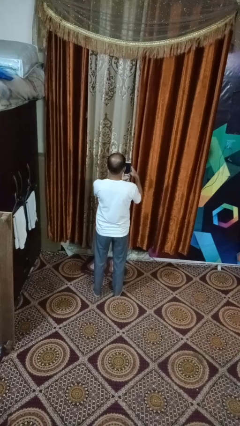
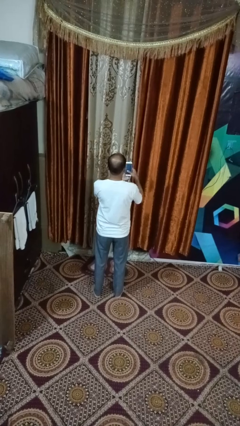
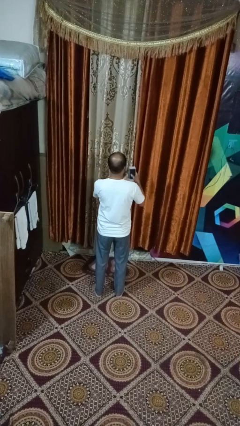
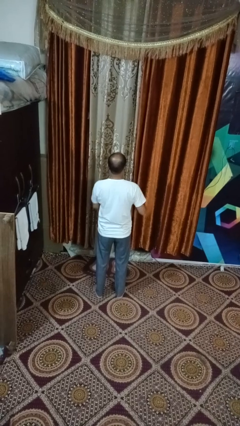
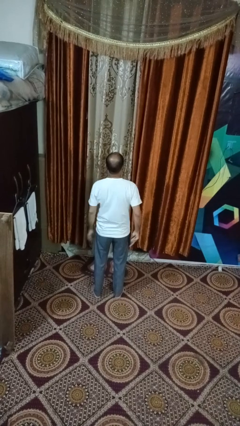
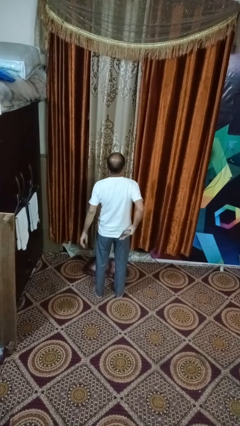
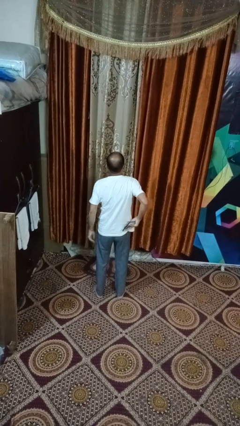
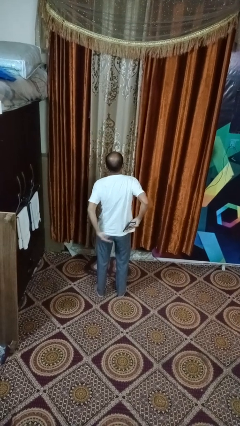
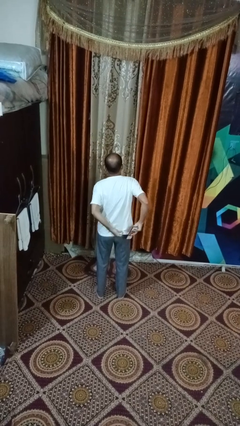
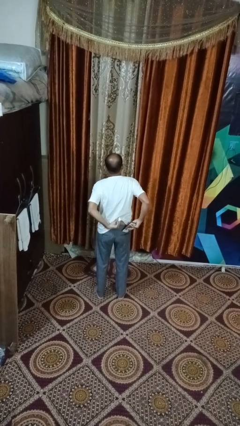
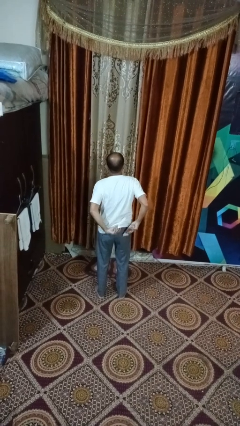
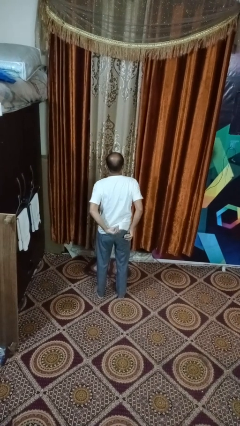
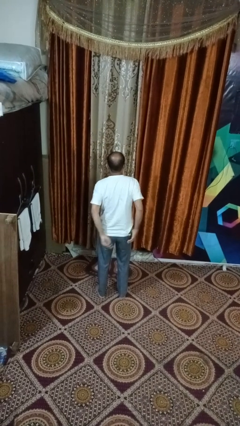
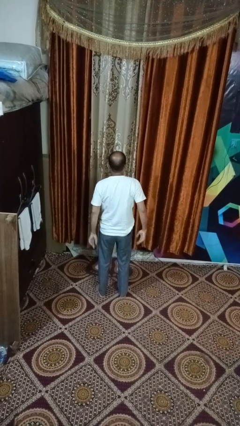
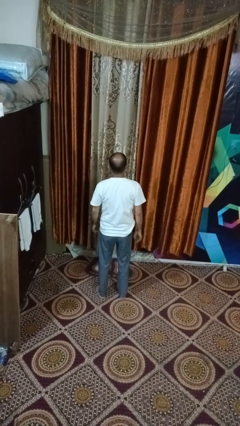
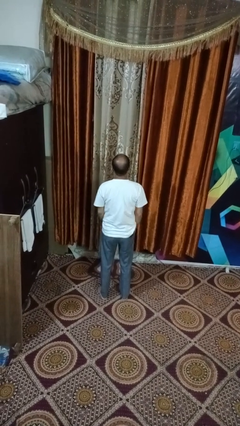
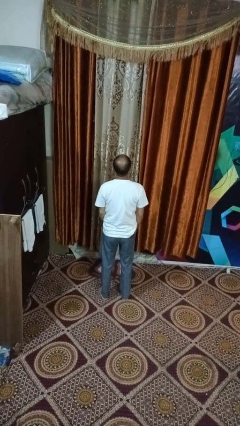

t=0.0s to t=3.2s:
person puts phone into pocket

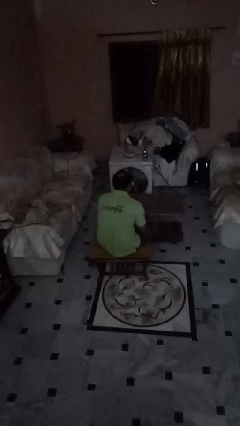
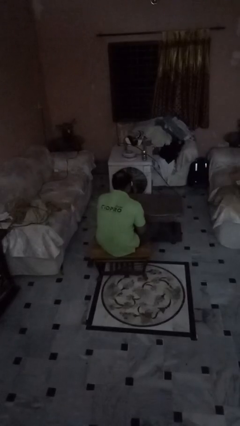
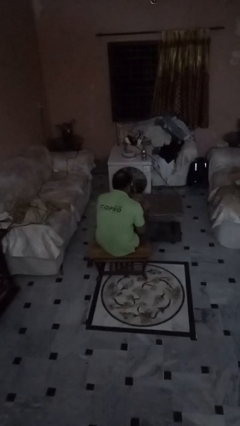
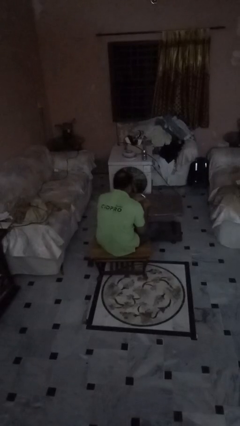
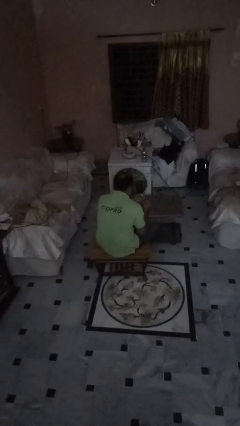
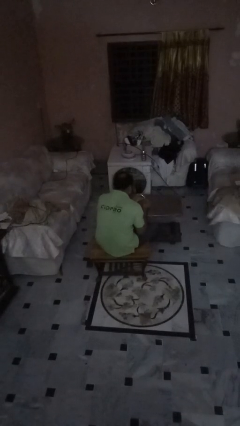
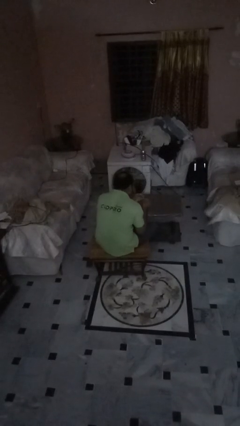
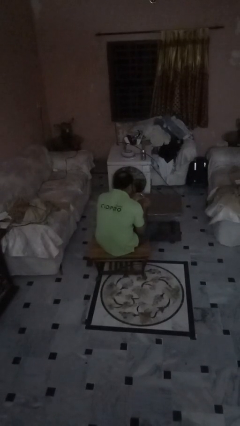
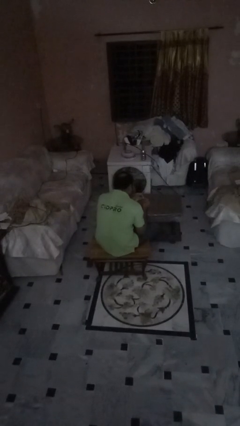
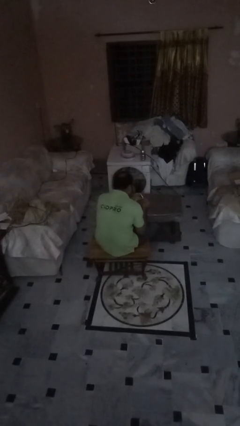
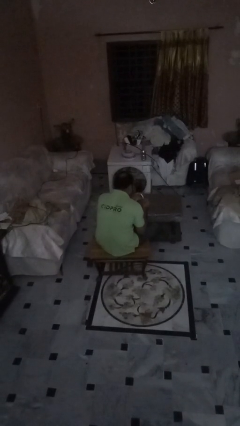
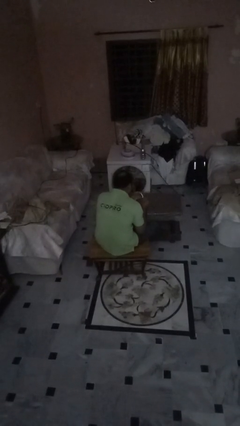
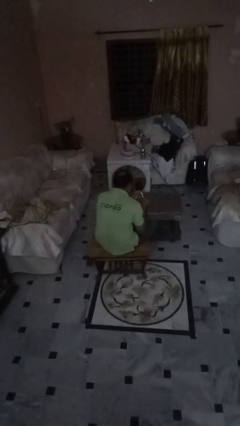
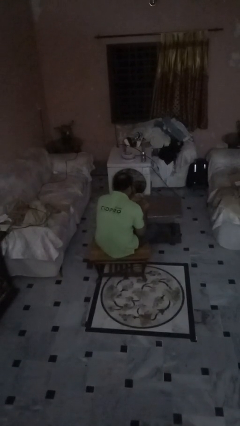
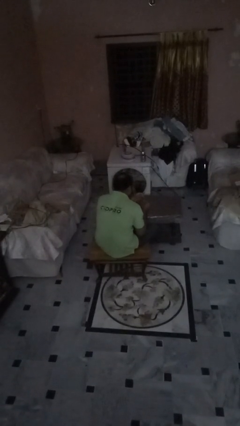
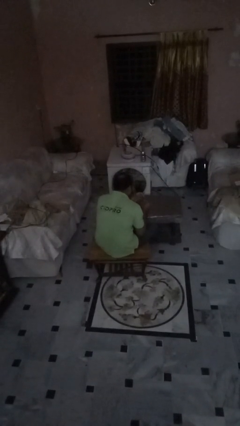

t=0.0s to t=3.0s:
person clips fingernails

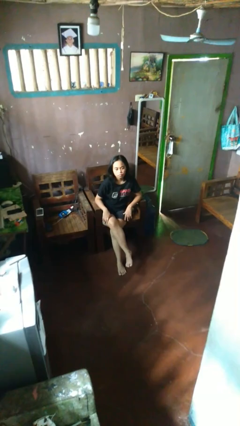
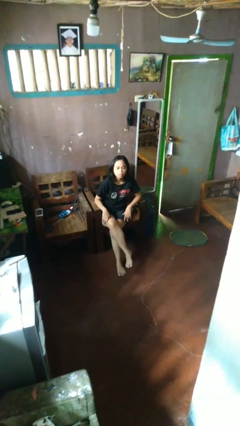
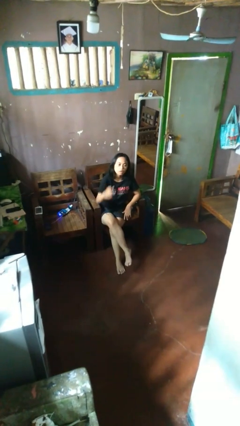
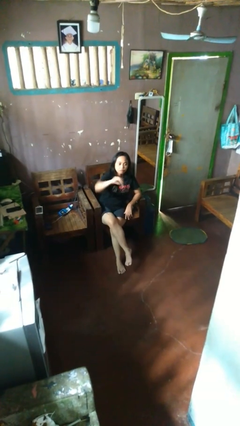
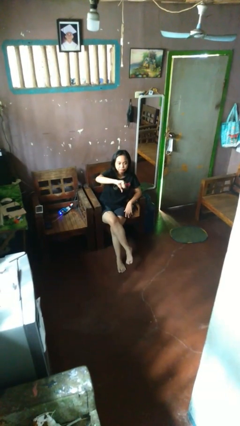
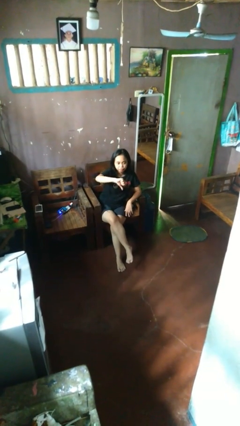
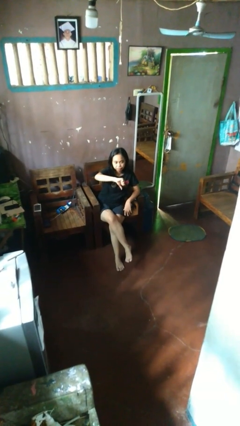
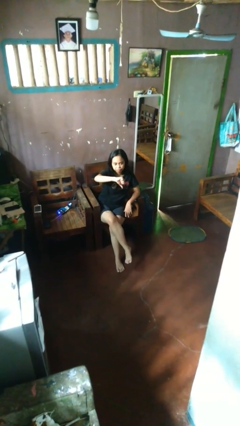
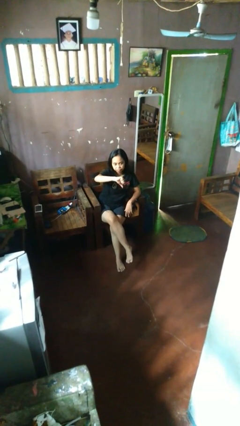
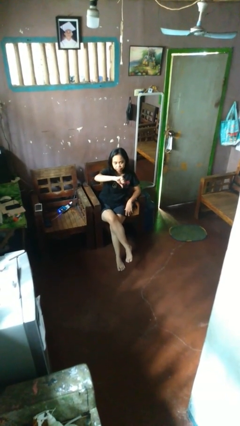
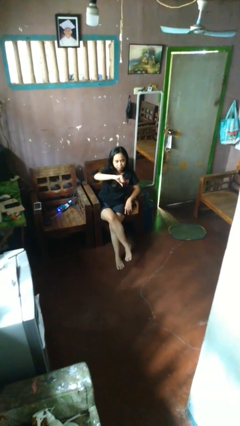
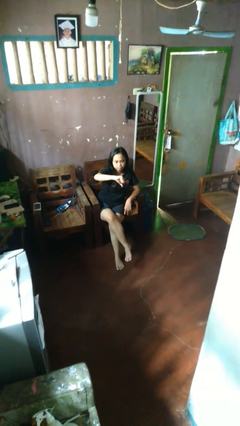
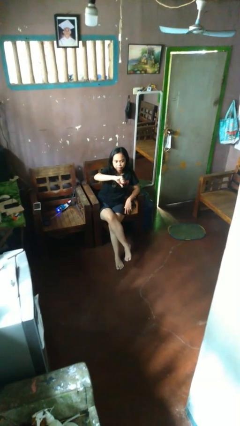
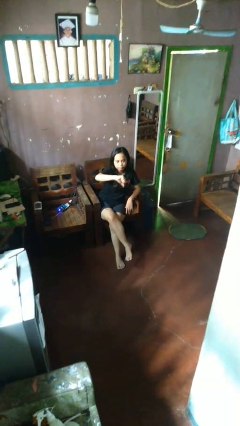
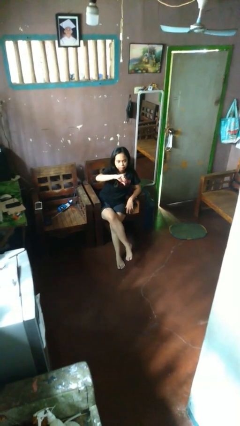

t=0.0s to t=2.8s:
person gestures thumbs down

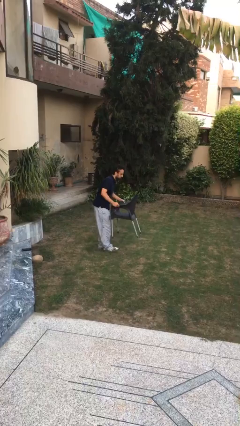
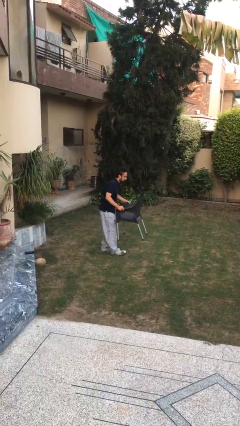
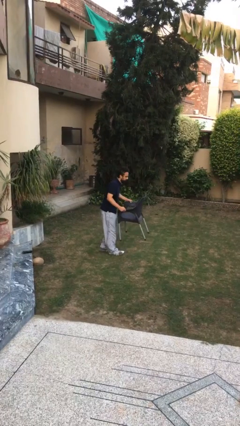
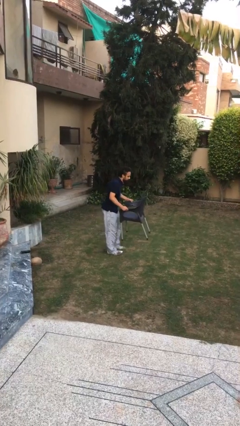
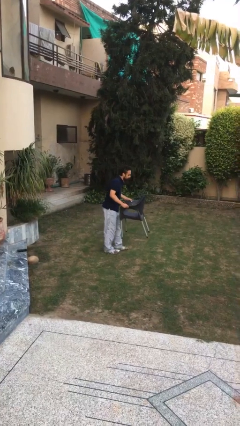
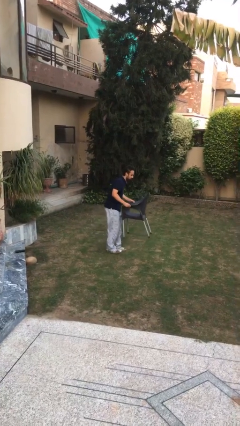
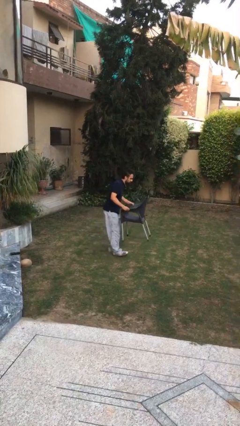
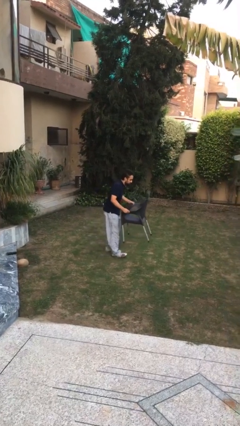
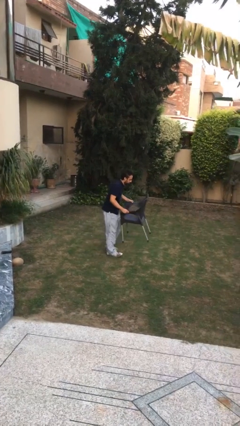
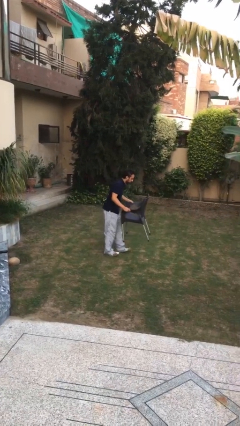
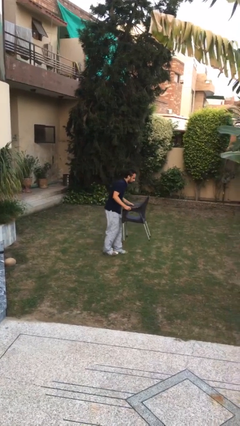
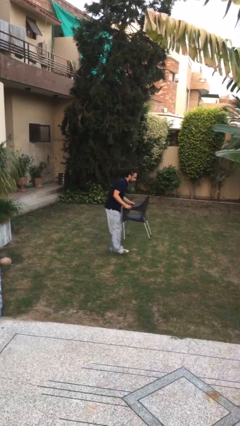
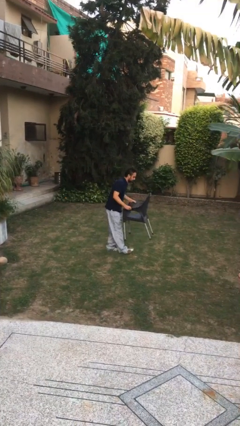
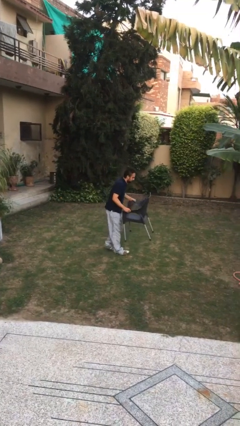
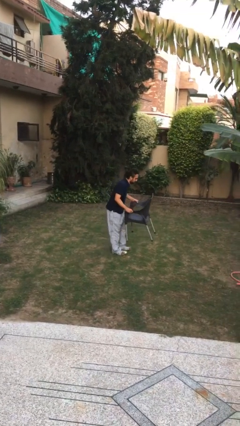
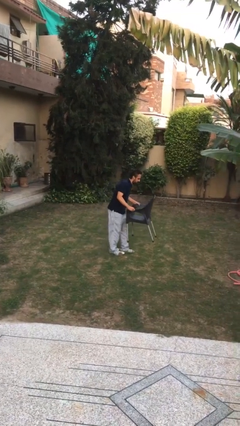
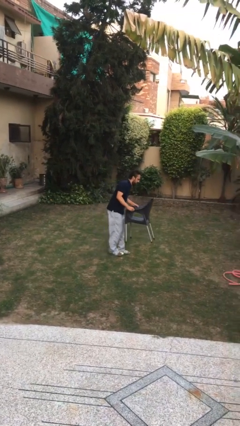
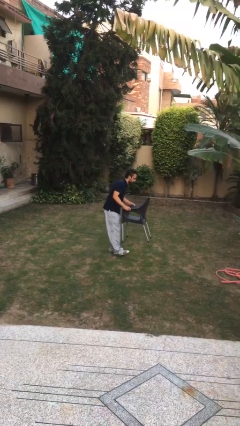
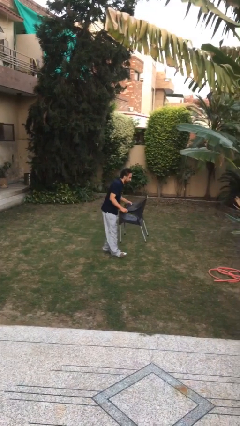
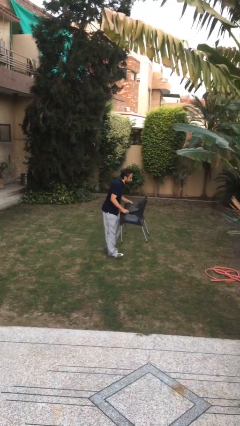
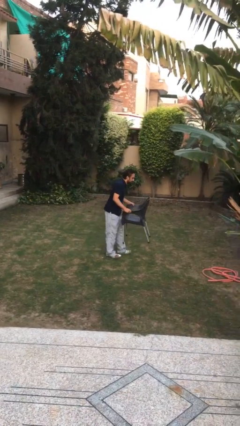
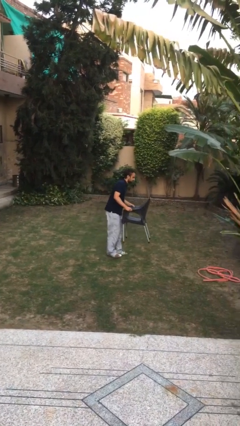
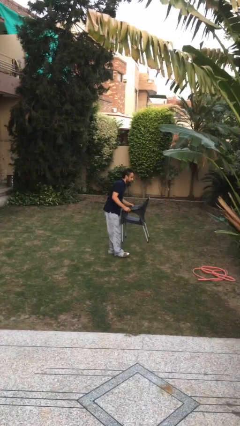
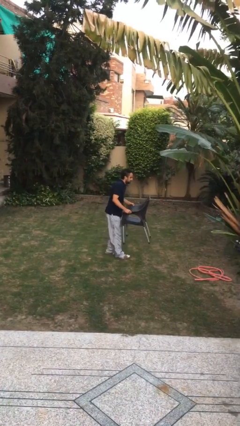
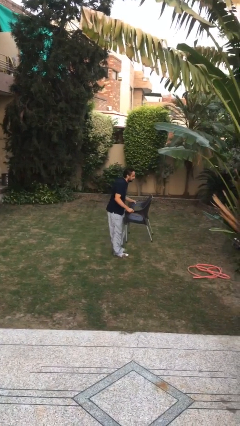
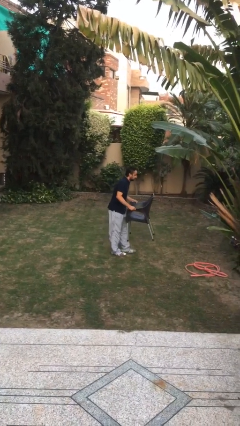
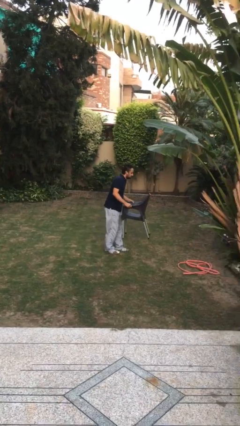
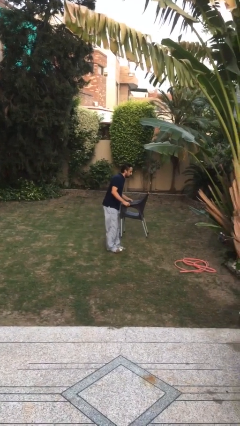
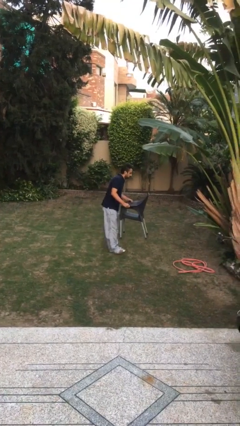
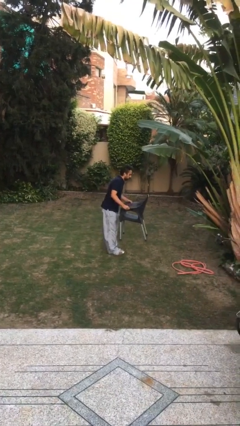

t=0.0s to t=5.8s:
person carries heavy object

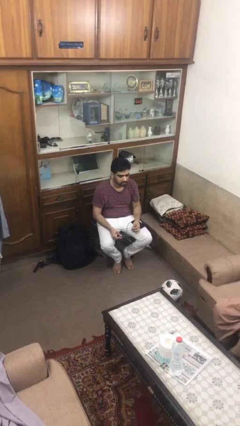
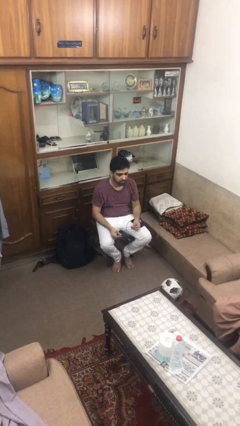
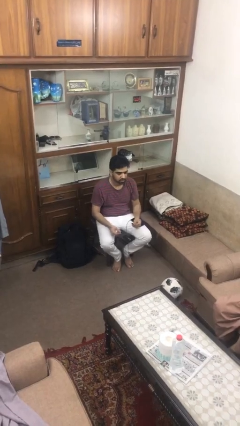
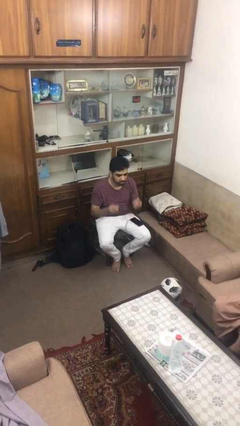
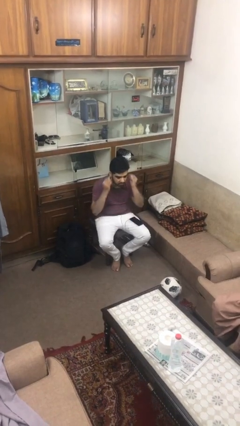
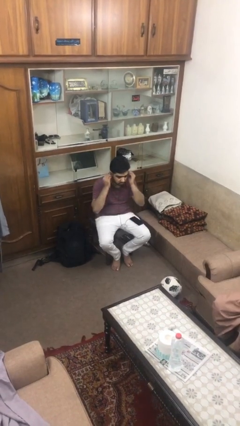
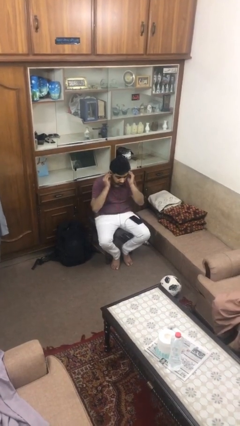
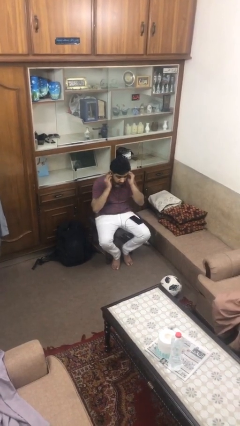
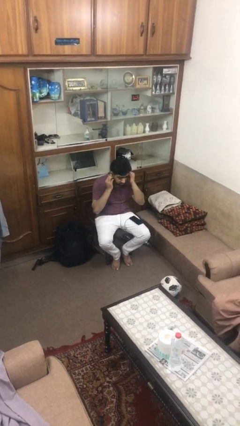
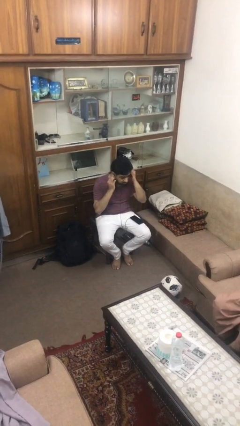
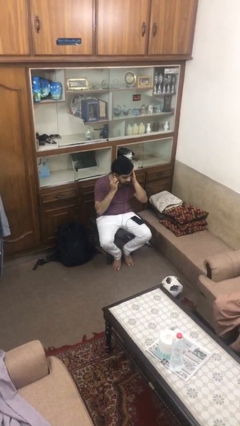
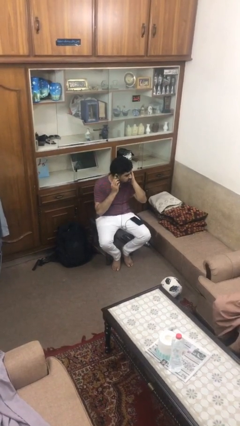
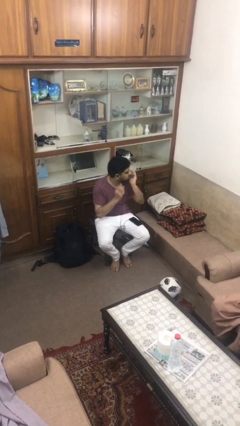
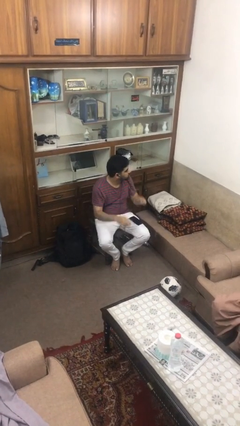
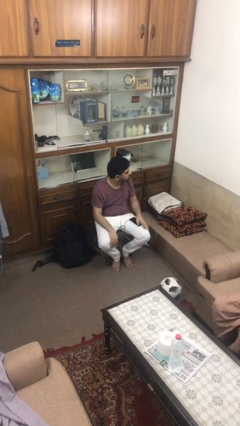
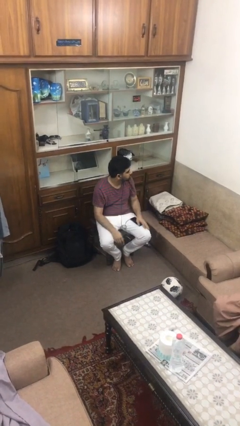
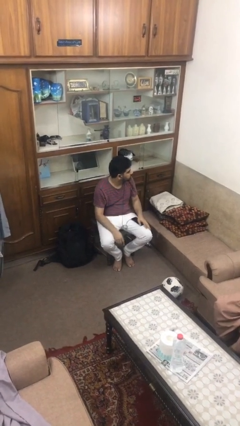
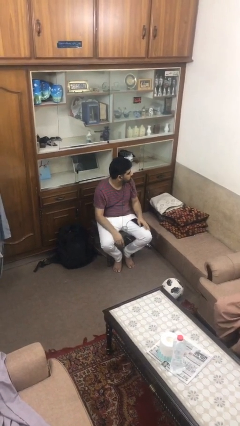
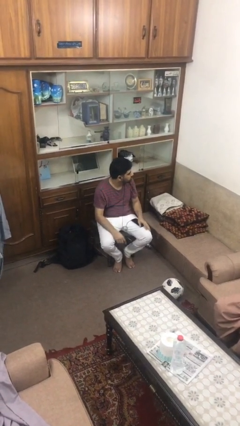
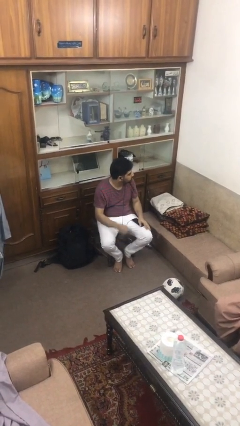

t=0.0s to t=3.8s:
person puts on headphones
